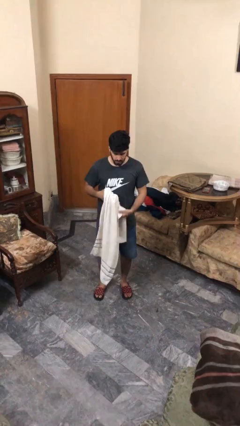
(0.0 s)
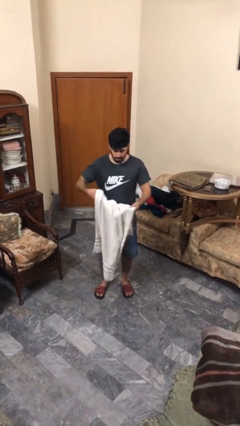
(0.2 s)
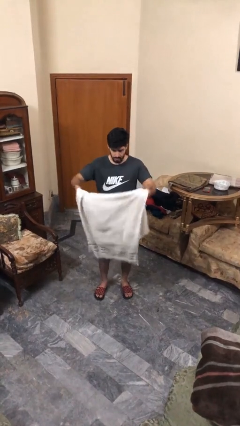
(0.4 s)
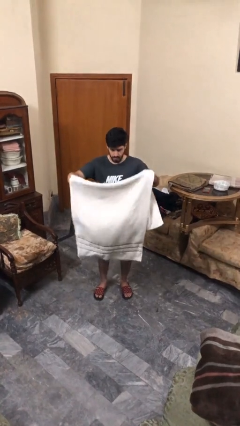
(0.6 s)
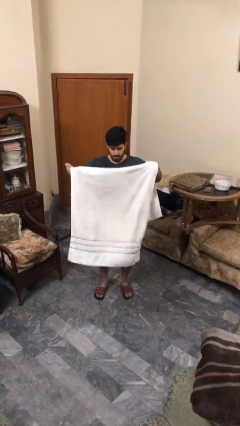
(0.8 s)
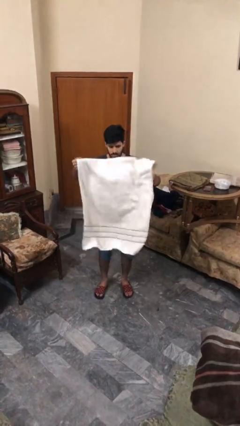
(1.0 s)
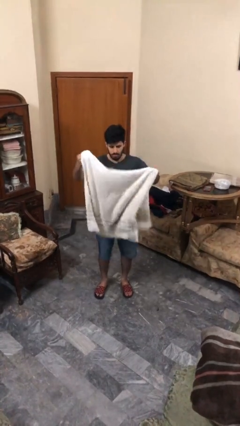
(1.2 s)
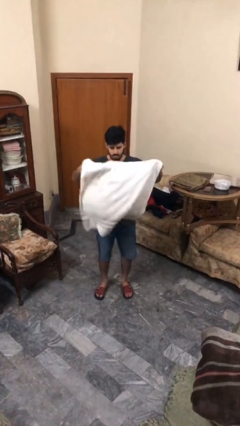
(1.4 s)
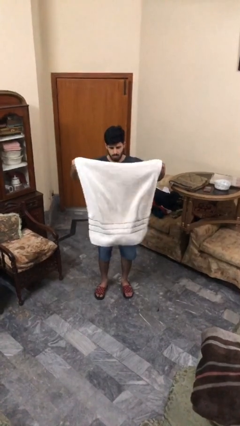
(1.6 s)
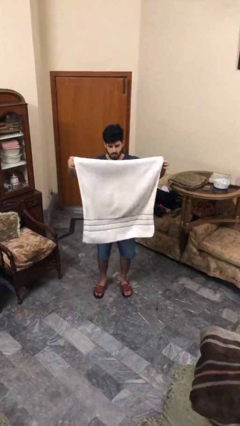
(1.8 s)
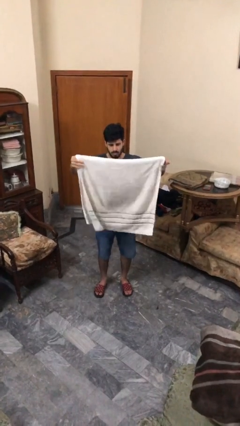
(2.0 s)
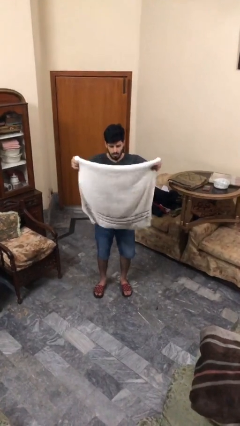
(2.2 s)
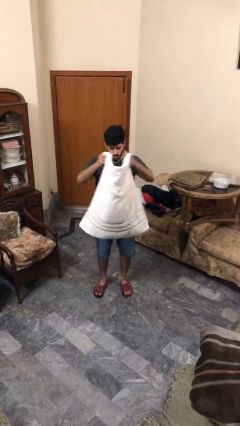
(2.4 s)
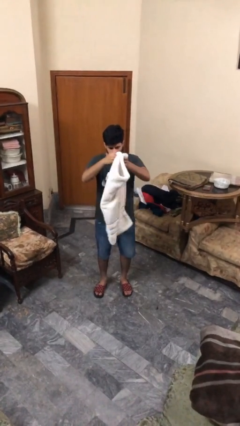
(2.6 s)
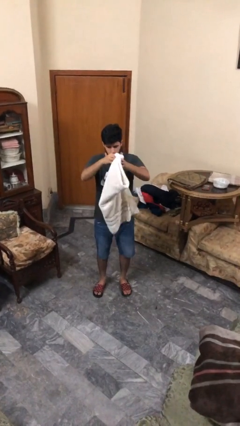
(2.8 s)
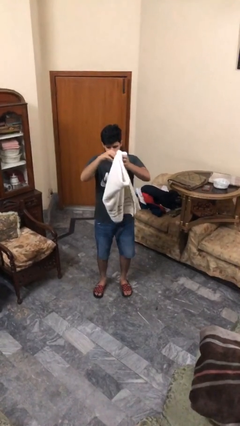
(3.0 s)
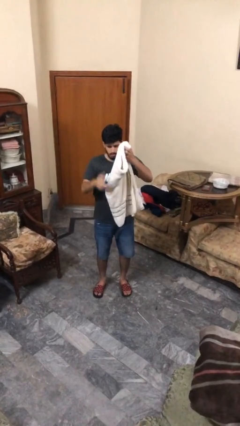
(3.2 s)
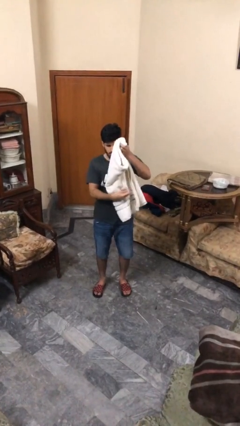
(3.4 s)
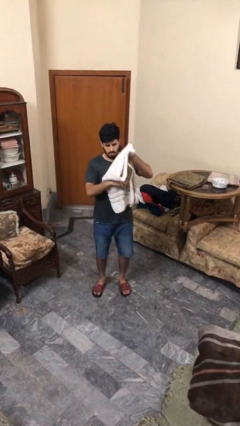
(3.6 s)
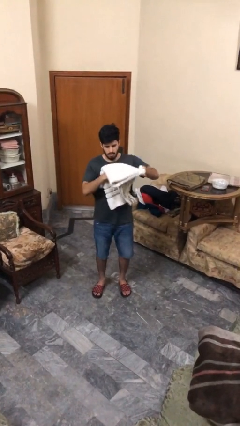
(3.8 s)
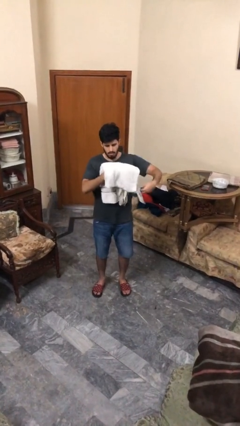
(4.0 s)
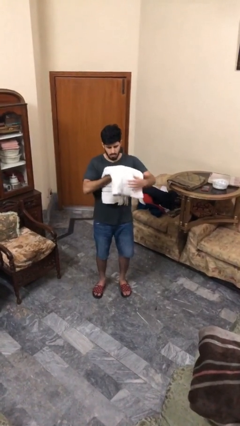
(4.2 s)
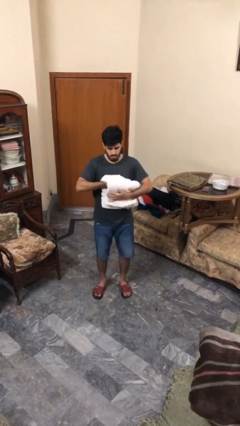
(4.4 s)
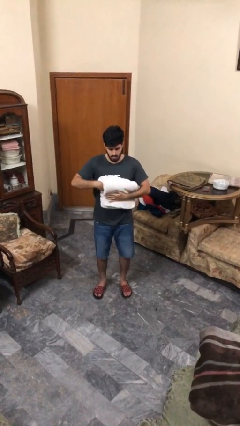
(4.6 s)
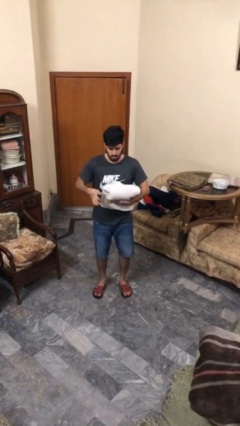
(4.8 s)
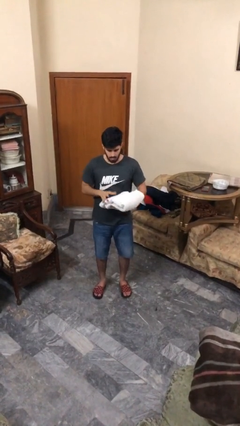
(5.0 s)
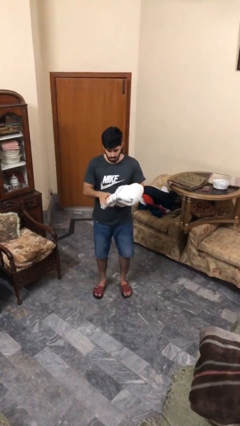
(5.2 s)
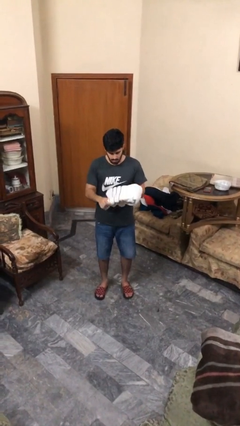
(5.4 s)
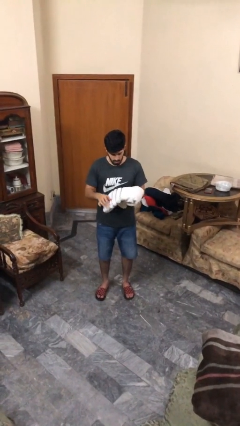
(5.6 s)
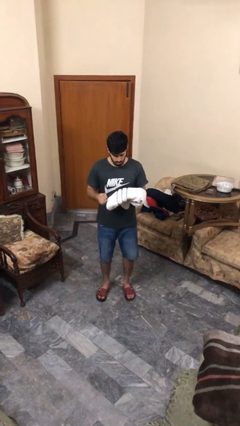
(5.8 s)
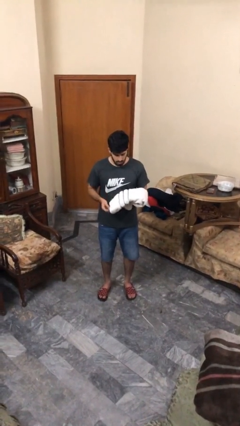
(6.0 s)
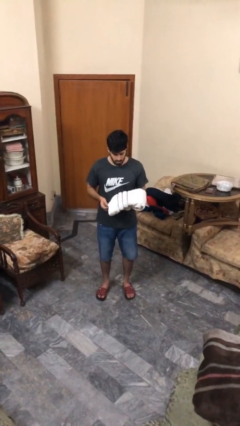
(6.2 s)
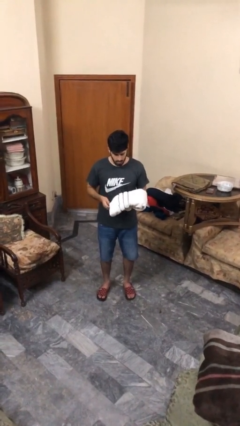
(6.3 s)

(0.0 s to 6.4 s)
person folds towel

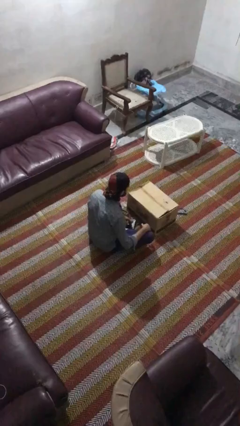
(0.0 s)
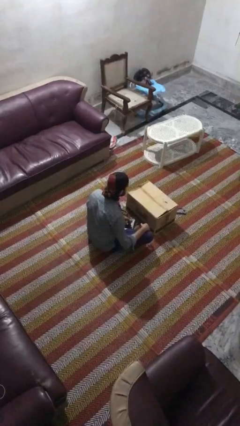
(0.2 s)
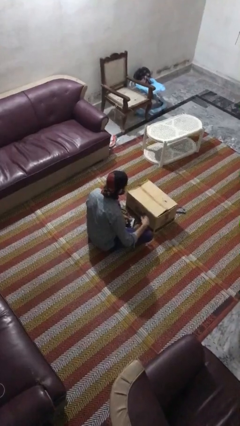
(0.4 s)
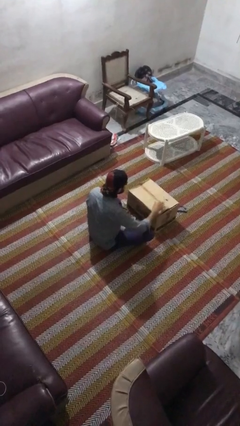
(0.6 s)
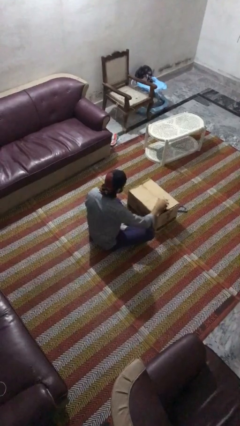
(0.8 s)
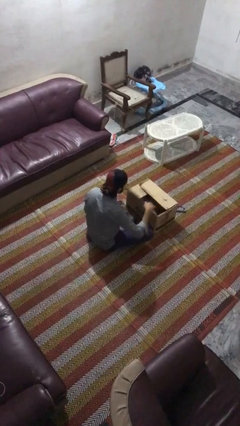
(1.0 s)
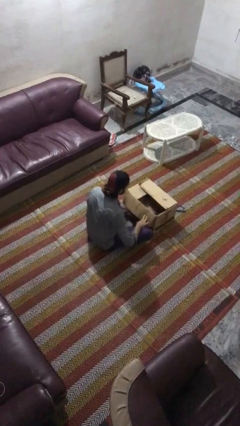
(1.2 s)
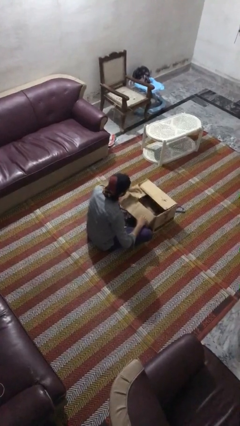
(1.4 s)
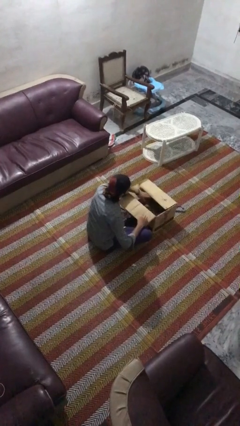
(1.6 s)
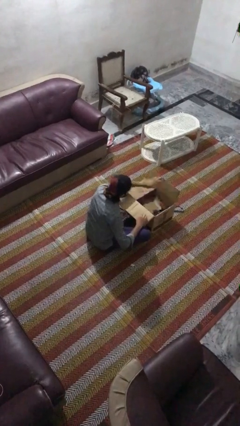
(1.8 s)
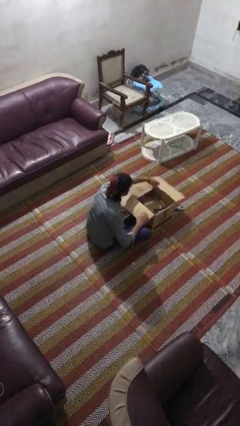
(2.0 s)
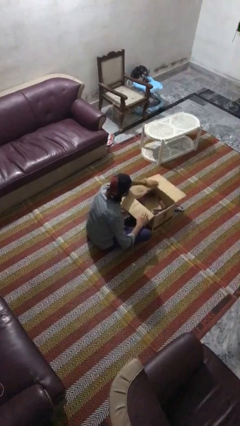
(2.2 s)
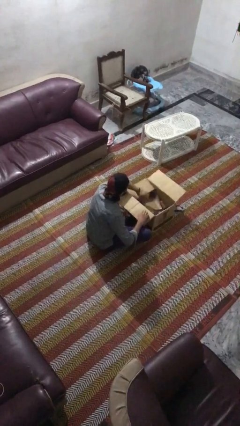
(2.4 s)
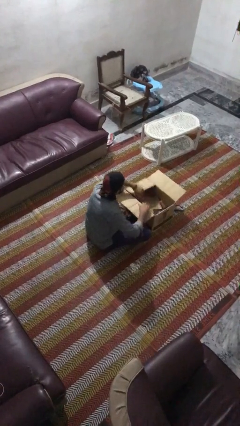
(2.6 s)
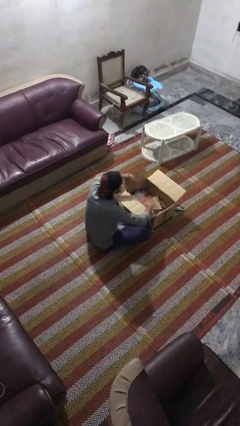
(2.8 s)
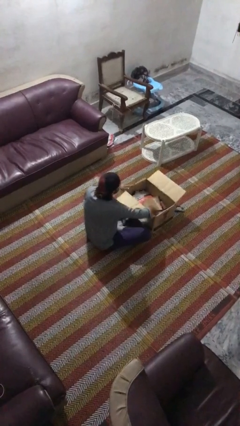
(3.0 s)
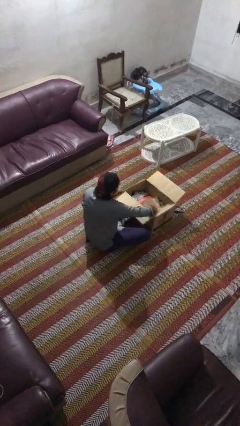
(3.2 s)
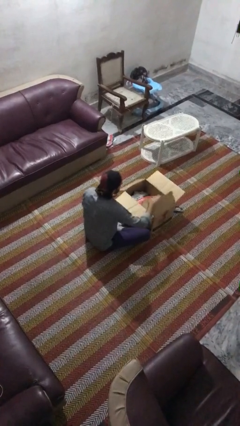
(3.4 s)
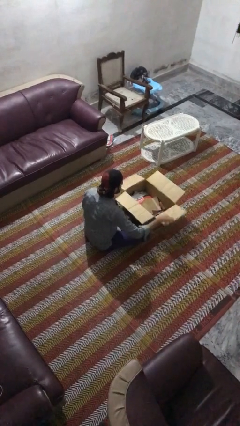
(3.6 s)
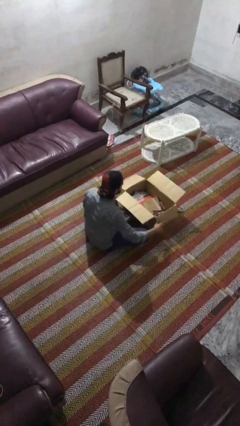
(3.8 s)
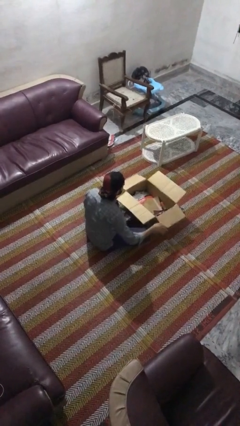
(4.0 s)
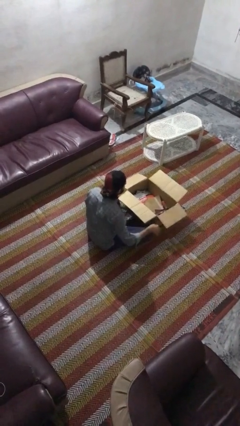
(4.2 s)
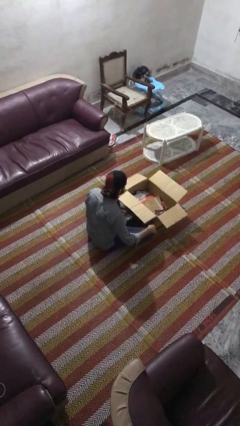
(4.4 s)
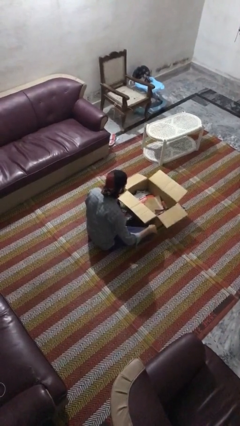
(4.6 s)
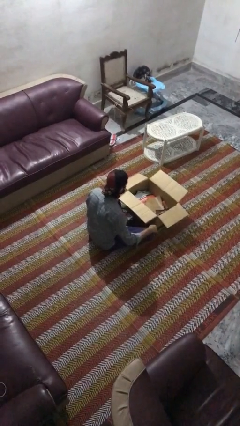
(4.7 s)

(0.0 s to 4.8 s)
person opens box

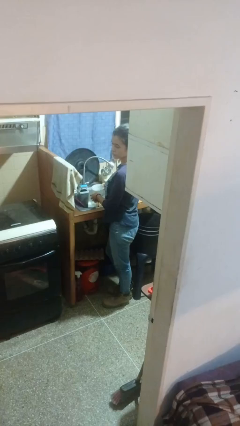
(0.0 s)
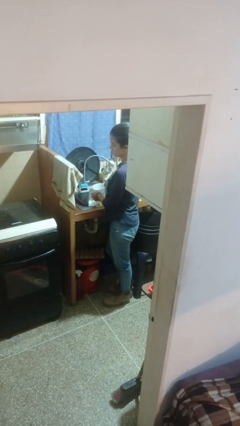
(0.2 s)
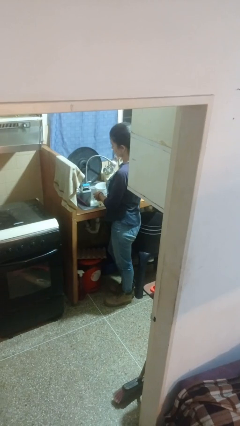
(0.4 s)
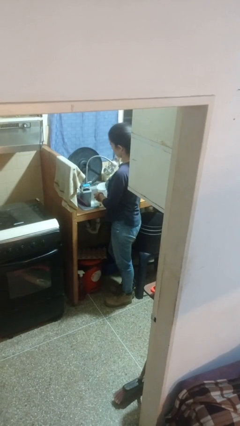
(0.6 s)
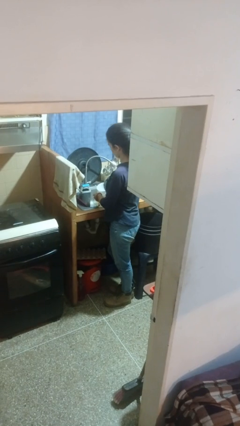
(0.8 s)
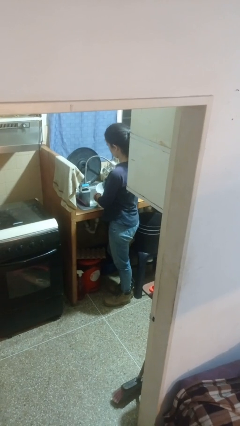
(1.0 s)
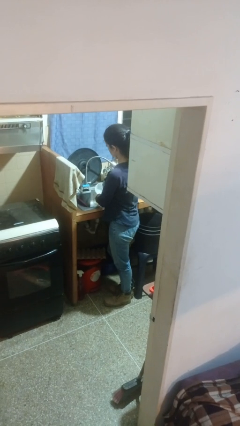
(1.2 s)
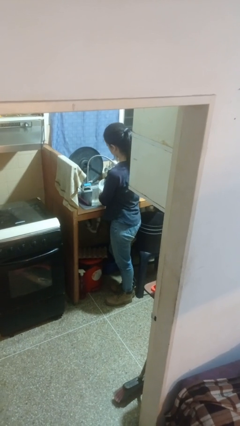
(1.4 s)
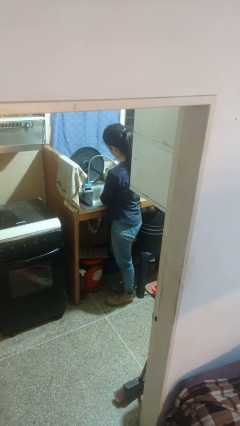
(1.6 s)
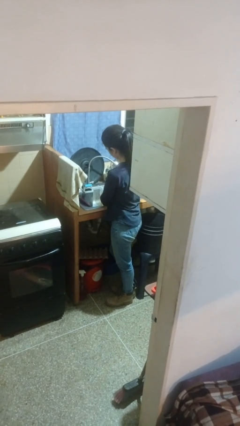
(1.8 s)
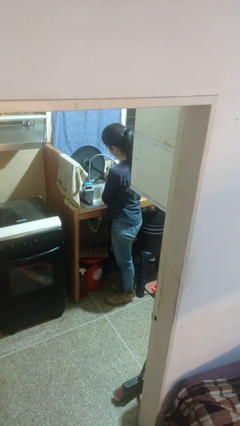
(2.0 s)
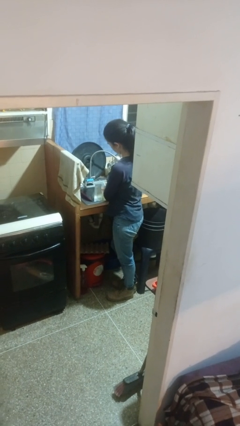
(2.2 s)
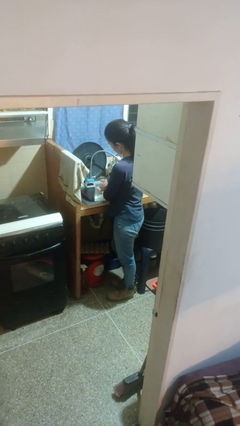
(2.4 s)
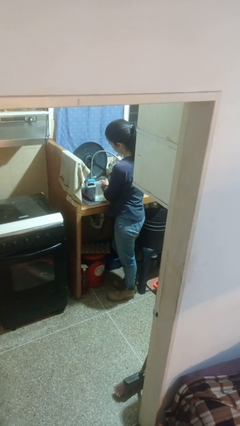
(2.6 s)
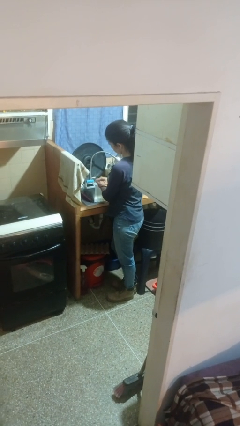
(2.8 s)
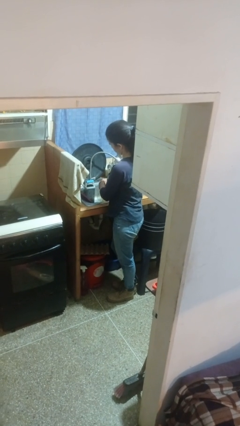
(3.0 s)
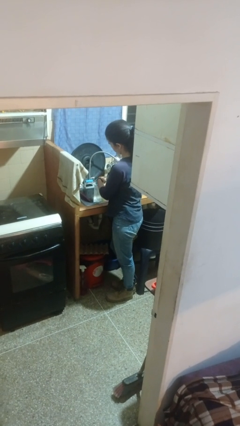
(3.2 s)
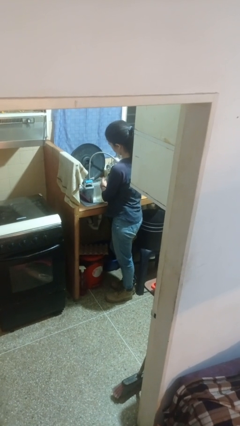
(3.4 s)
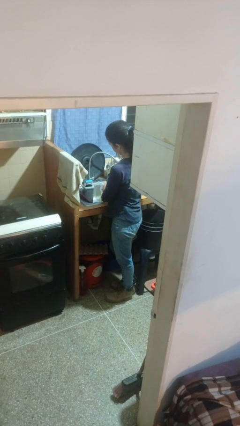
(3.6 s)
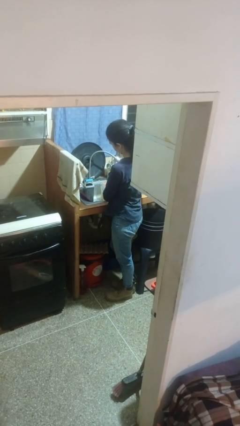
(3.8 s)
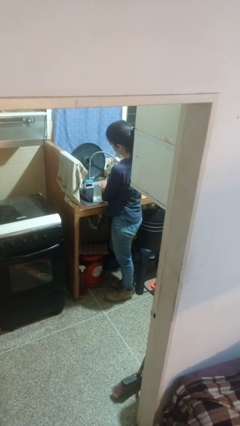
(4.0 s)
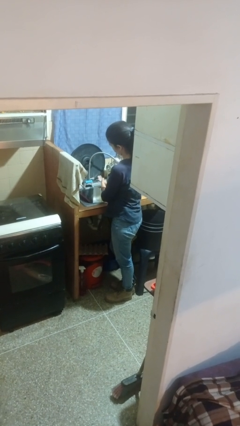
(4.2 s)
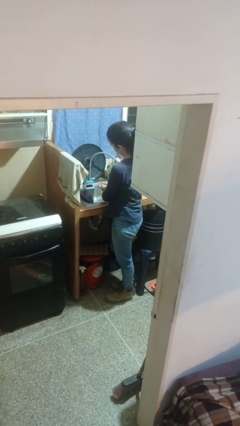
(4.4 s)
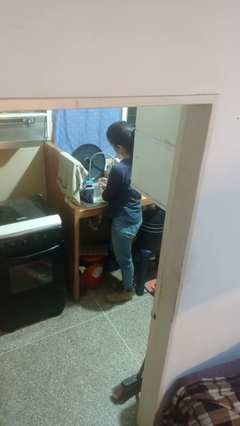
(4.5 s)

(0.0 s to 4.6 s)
person washes hands

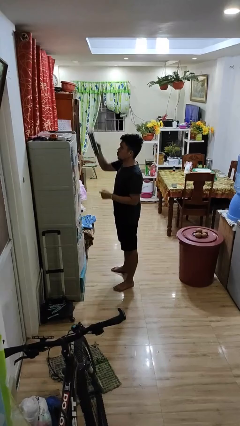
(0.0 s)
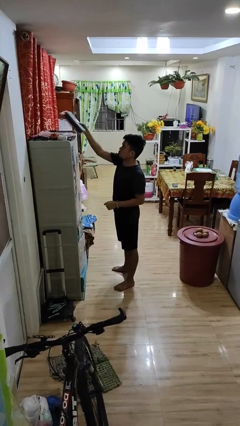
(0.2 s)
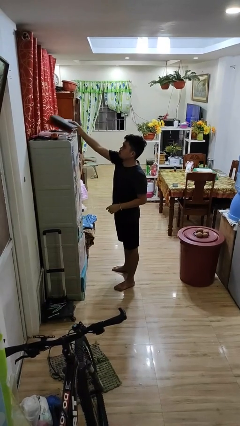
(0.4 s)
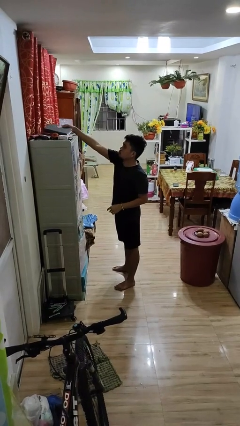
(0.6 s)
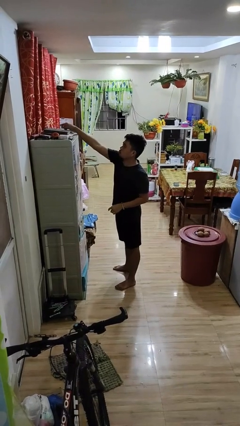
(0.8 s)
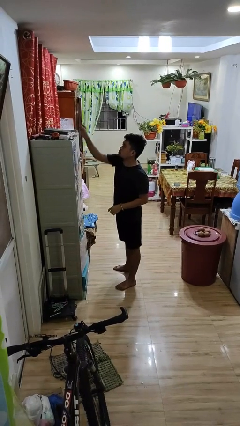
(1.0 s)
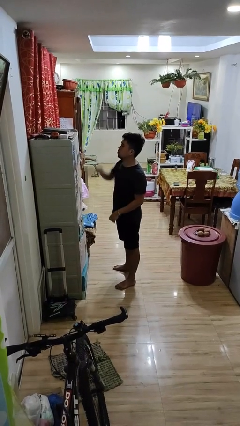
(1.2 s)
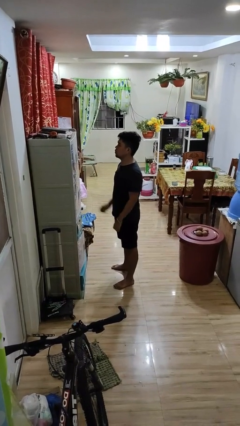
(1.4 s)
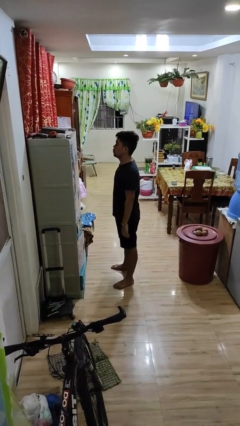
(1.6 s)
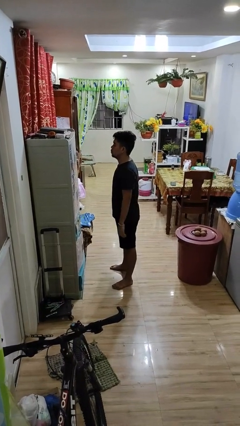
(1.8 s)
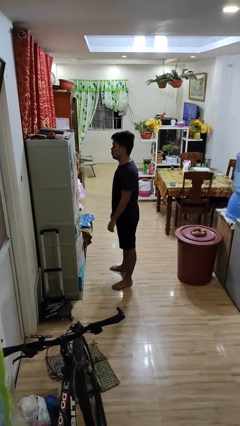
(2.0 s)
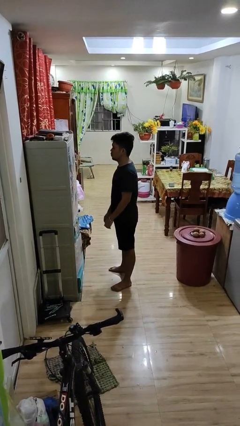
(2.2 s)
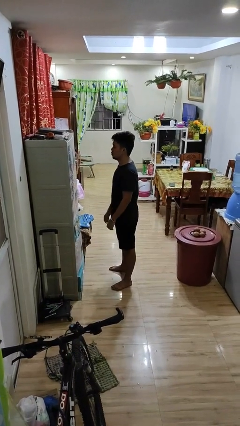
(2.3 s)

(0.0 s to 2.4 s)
person puts down object on shelf
